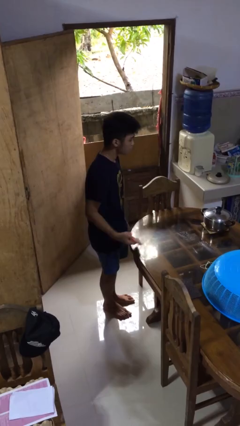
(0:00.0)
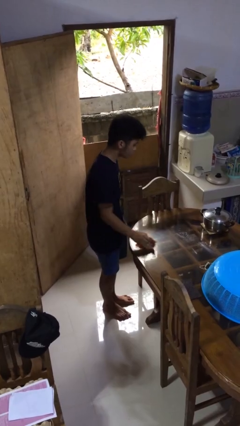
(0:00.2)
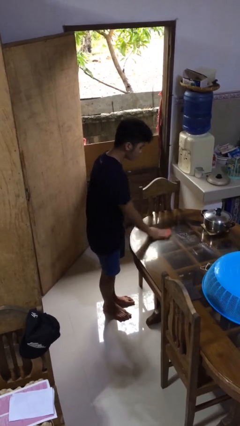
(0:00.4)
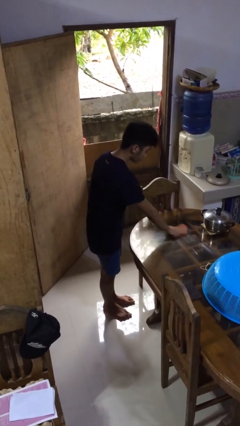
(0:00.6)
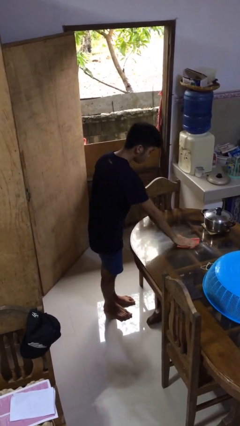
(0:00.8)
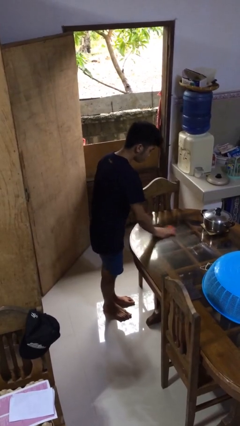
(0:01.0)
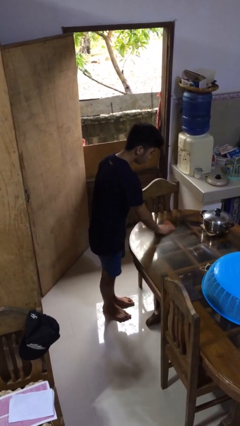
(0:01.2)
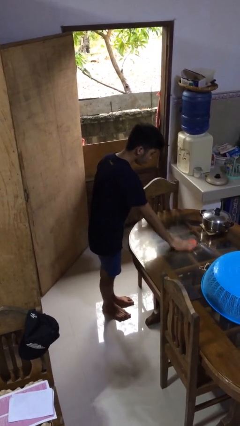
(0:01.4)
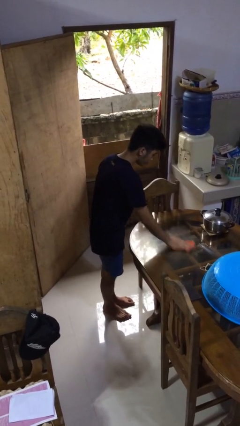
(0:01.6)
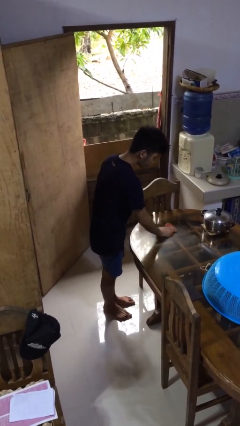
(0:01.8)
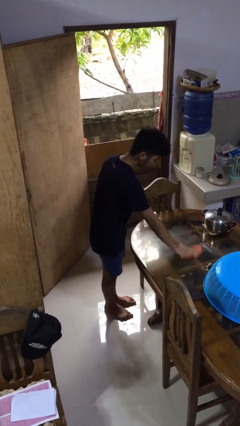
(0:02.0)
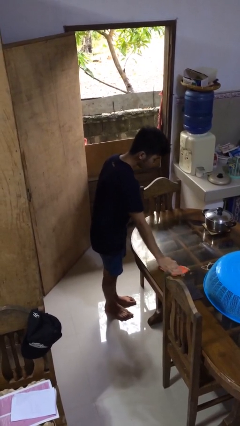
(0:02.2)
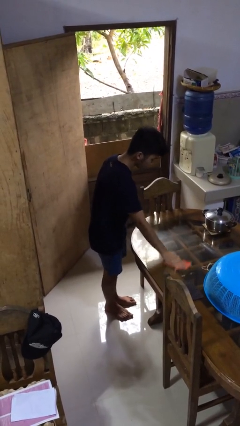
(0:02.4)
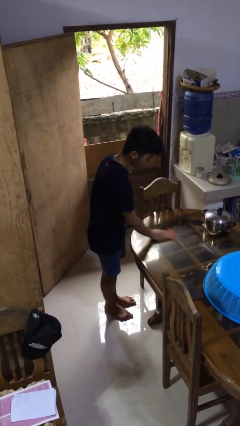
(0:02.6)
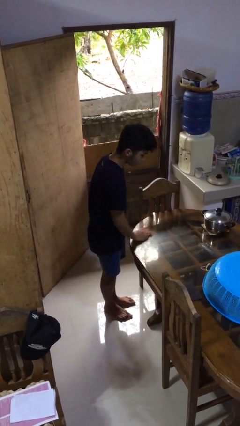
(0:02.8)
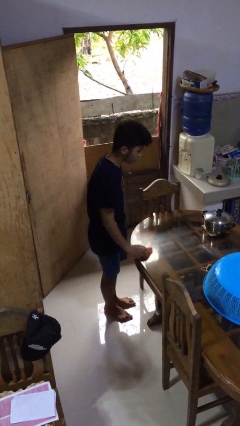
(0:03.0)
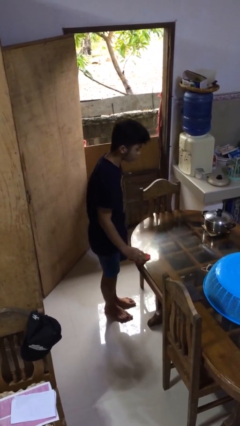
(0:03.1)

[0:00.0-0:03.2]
person cleans table with rag

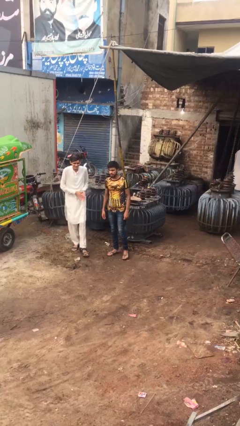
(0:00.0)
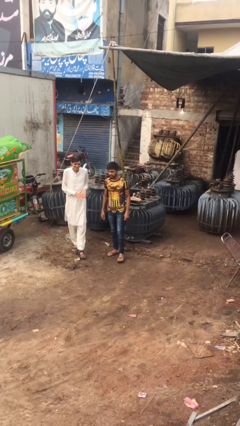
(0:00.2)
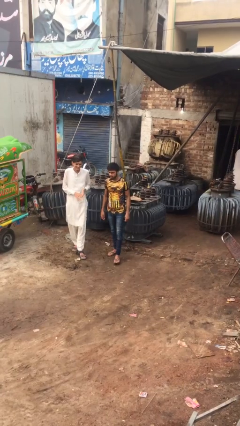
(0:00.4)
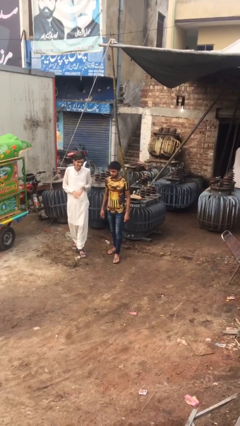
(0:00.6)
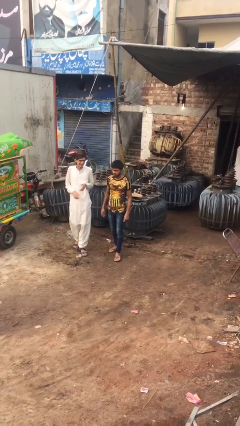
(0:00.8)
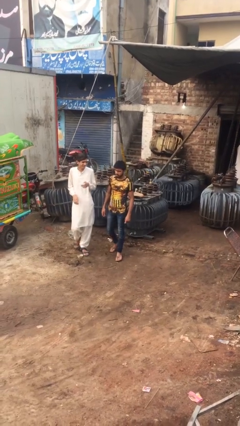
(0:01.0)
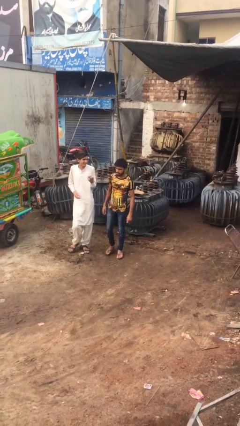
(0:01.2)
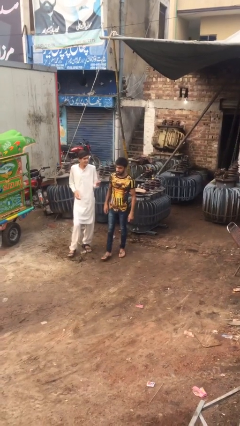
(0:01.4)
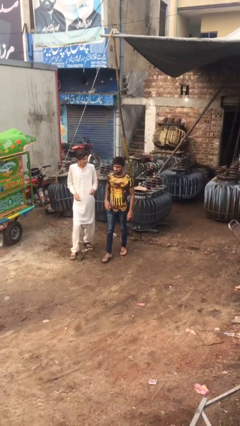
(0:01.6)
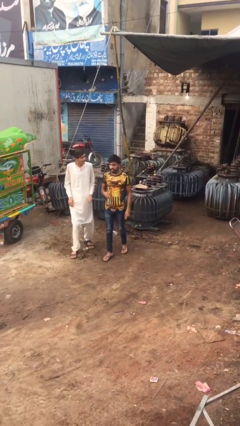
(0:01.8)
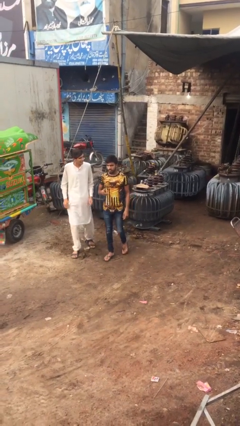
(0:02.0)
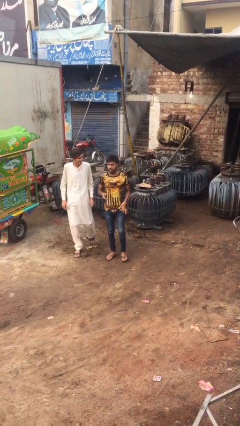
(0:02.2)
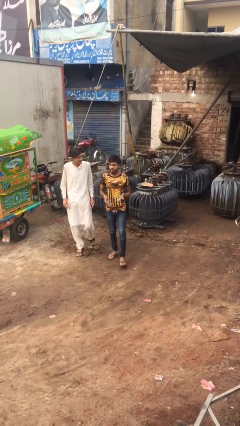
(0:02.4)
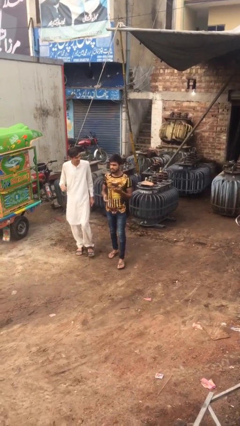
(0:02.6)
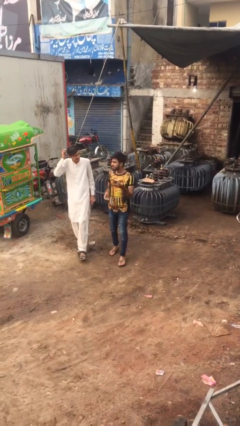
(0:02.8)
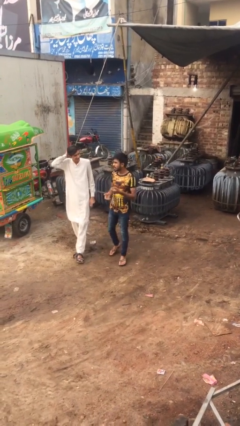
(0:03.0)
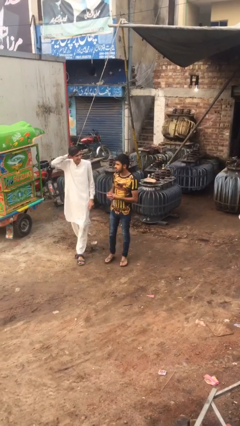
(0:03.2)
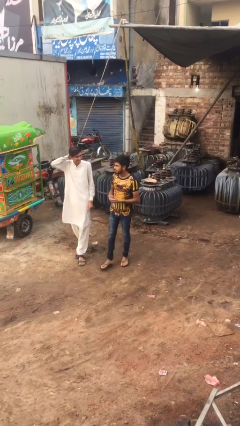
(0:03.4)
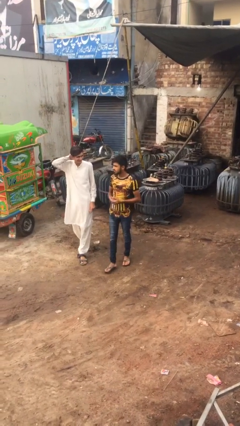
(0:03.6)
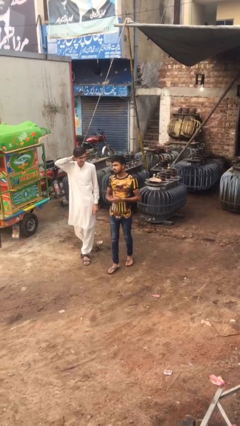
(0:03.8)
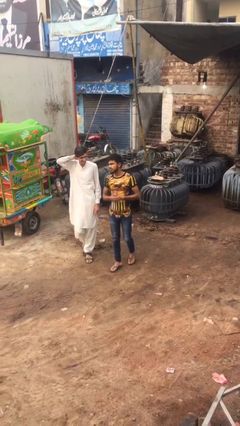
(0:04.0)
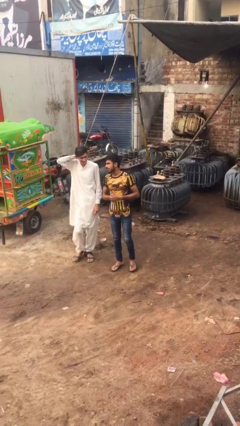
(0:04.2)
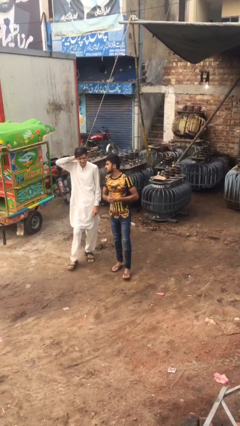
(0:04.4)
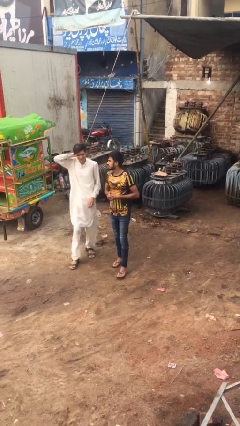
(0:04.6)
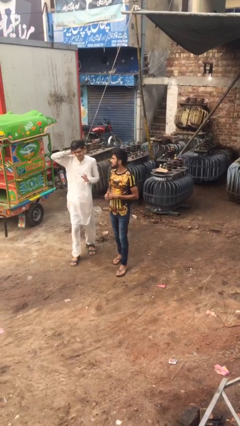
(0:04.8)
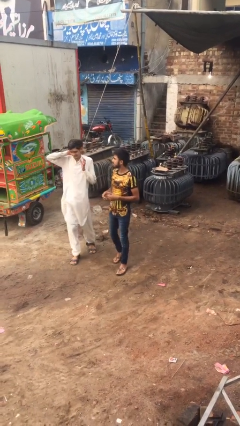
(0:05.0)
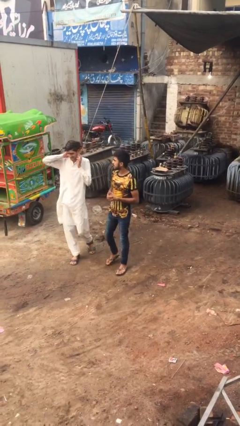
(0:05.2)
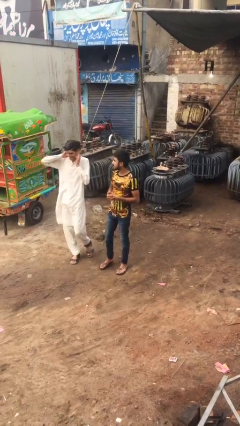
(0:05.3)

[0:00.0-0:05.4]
person talks to person

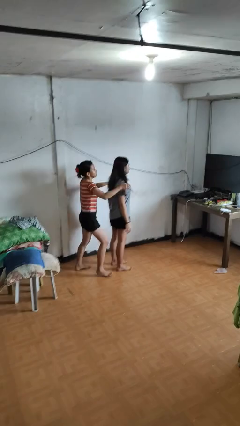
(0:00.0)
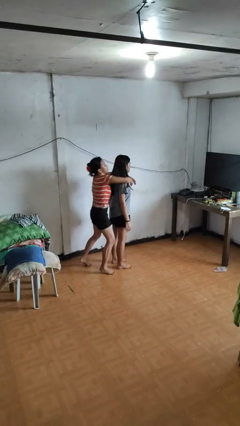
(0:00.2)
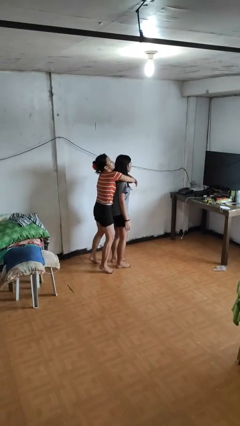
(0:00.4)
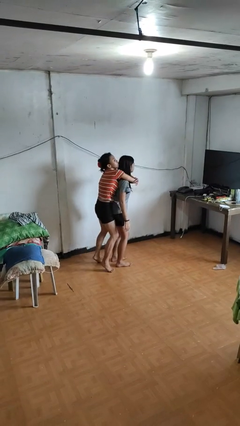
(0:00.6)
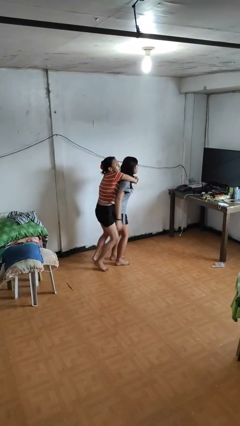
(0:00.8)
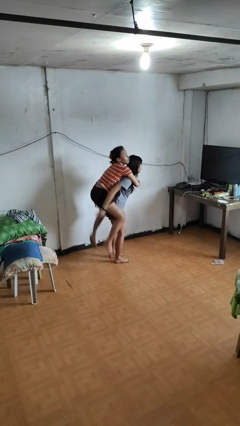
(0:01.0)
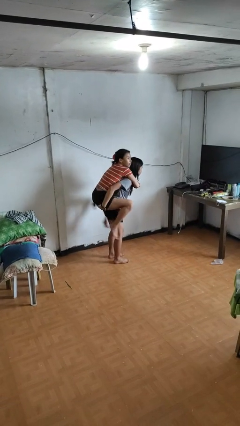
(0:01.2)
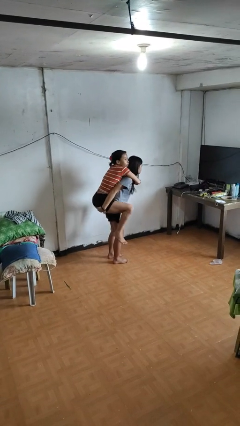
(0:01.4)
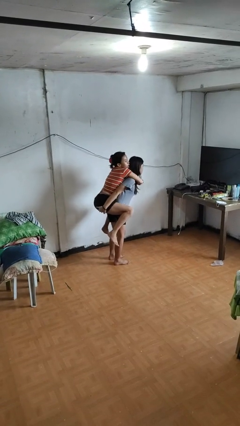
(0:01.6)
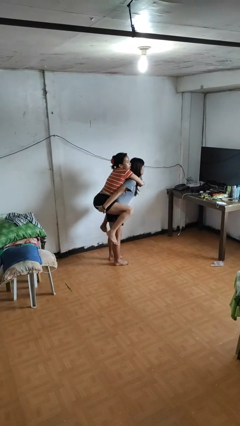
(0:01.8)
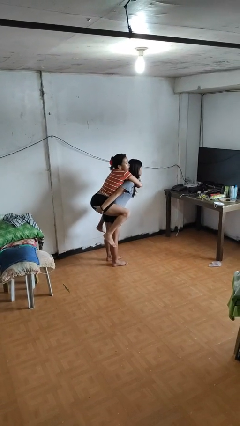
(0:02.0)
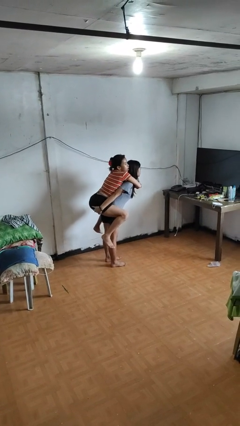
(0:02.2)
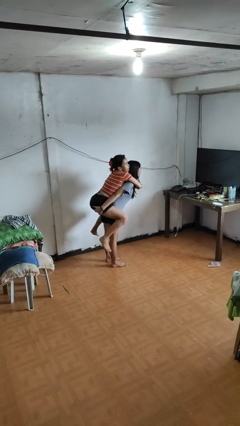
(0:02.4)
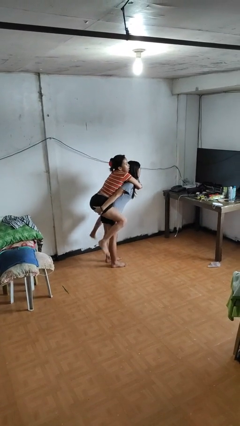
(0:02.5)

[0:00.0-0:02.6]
person carries person over shoulder

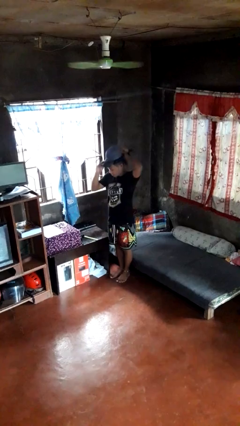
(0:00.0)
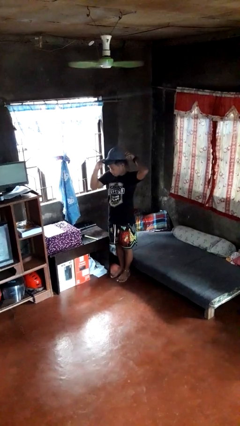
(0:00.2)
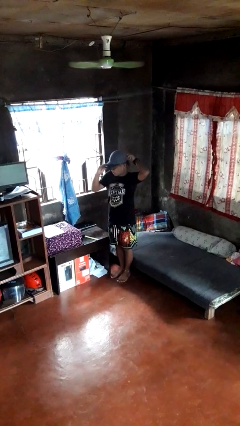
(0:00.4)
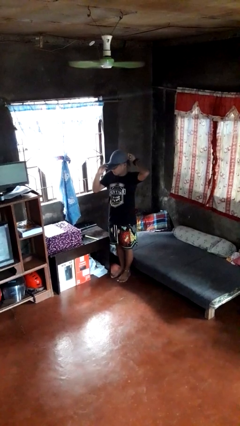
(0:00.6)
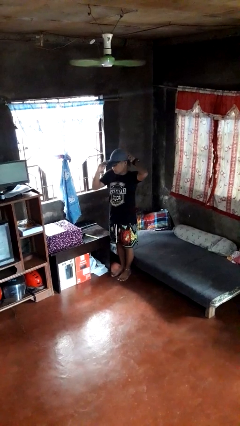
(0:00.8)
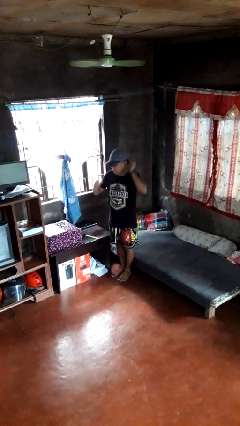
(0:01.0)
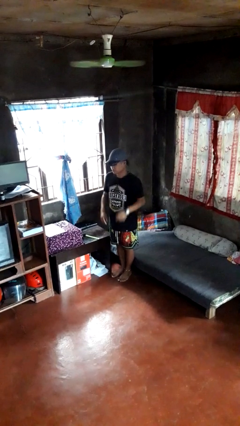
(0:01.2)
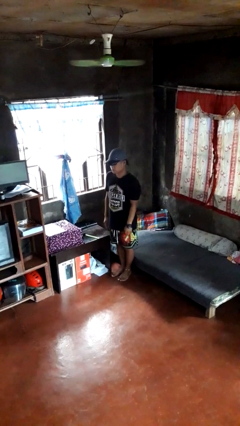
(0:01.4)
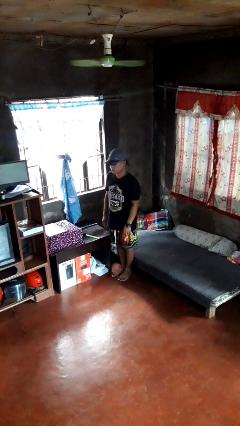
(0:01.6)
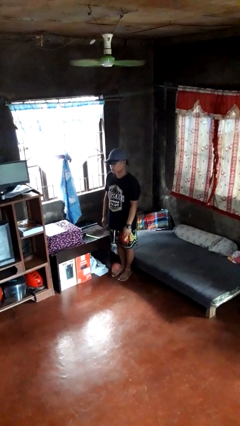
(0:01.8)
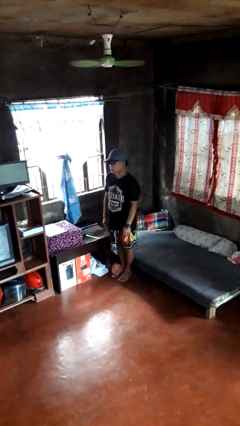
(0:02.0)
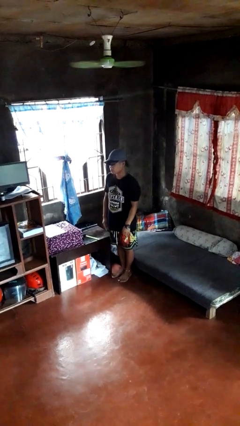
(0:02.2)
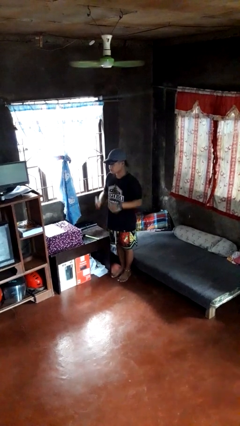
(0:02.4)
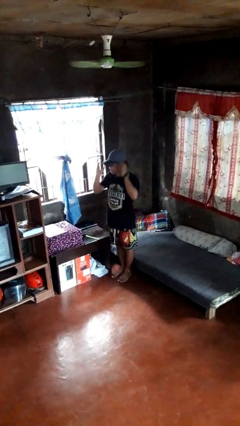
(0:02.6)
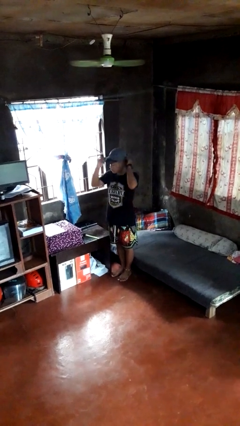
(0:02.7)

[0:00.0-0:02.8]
person puts on hat

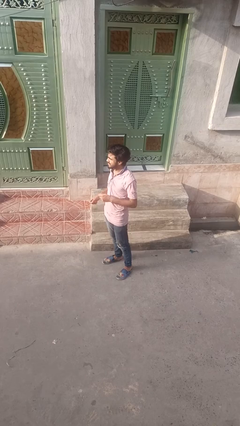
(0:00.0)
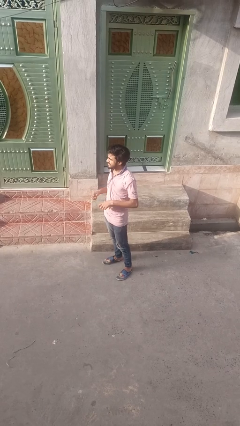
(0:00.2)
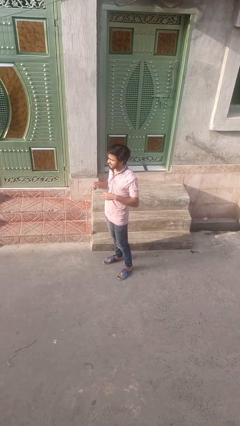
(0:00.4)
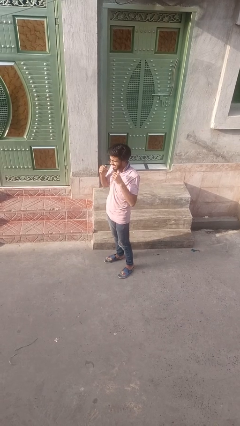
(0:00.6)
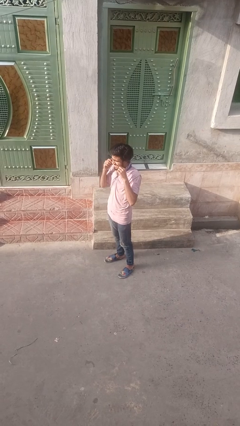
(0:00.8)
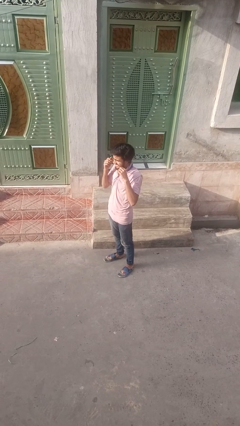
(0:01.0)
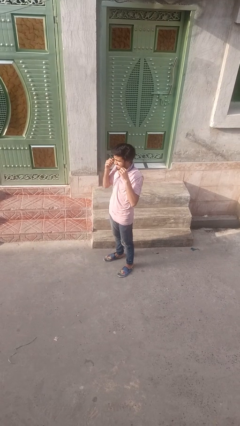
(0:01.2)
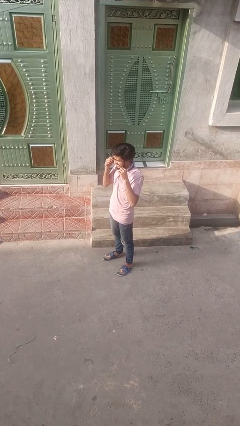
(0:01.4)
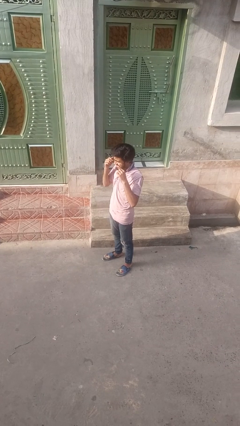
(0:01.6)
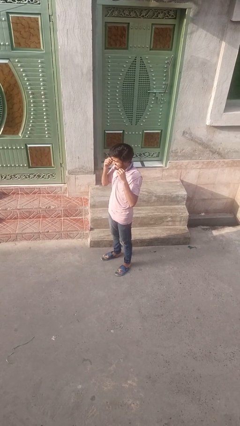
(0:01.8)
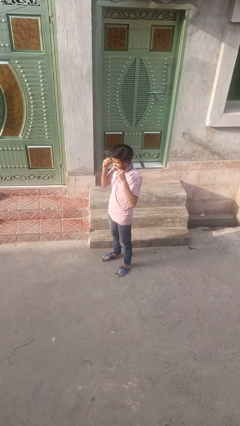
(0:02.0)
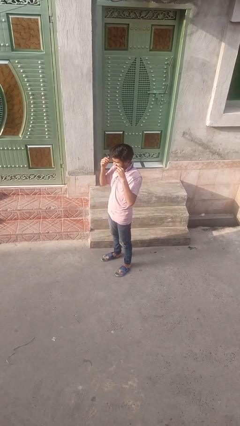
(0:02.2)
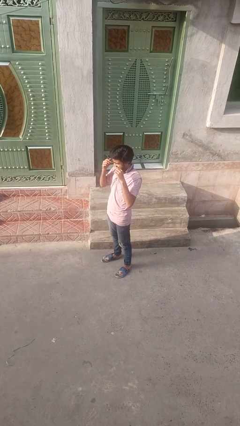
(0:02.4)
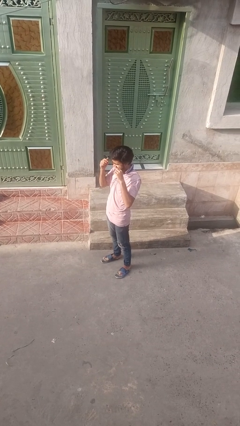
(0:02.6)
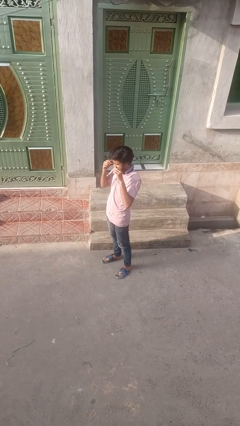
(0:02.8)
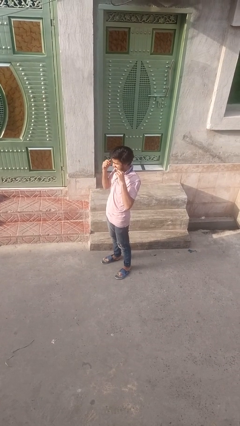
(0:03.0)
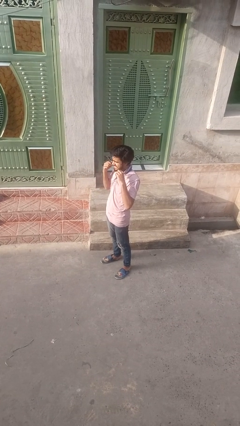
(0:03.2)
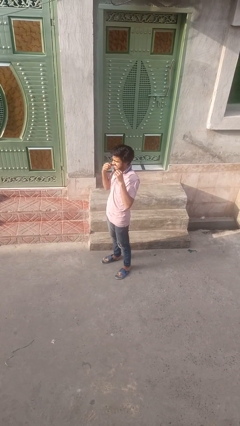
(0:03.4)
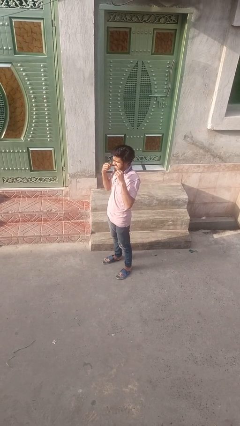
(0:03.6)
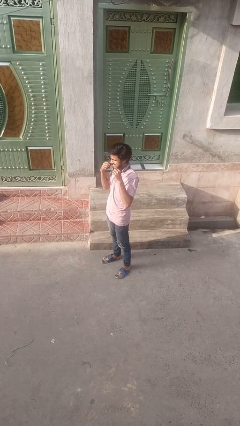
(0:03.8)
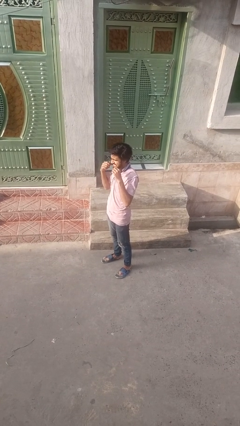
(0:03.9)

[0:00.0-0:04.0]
person flosses
